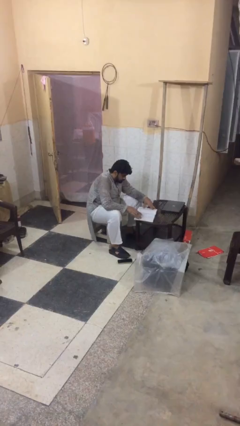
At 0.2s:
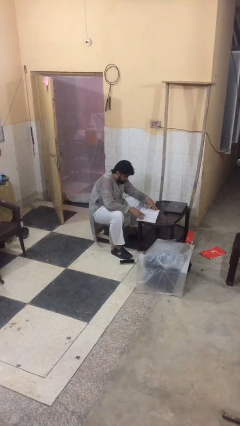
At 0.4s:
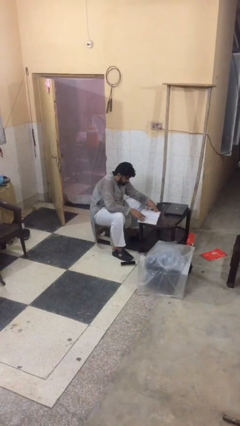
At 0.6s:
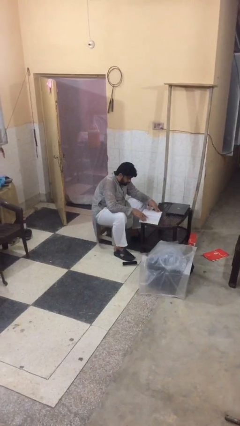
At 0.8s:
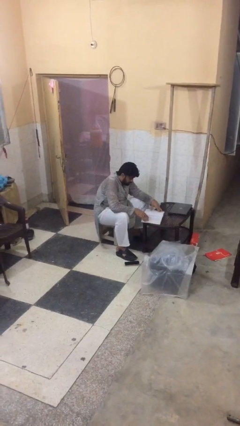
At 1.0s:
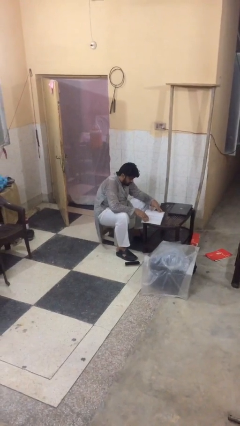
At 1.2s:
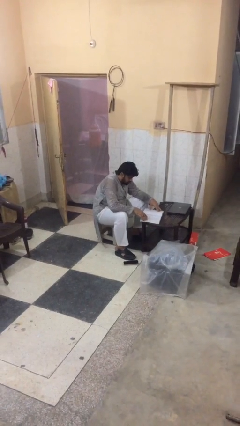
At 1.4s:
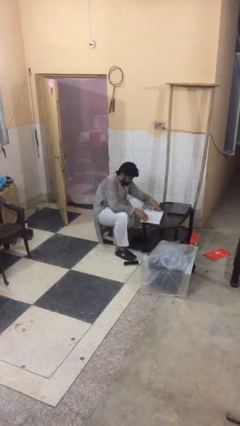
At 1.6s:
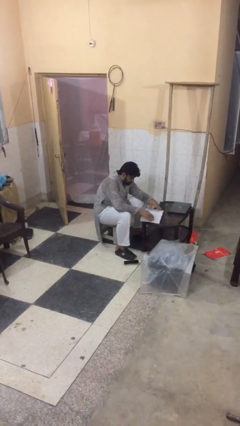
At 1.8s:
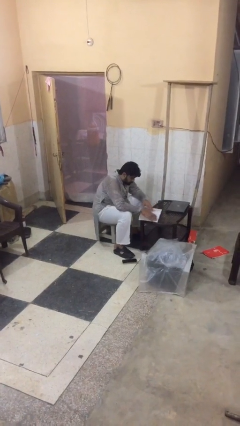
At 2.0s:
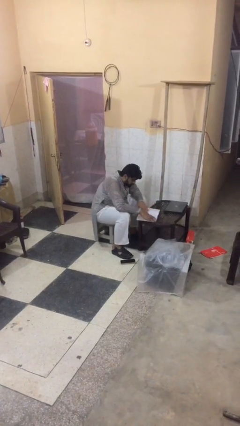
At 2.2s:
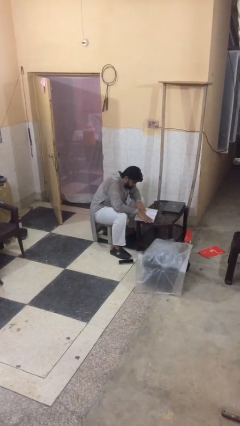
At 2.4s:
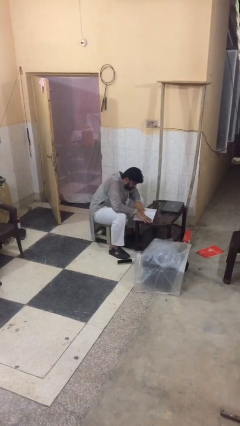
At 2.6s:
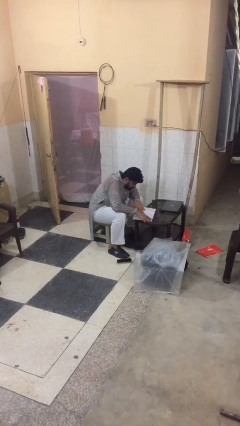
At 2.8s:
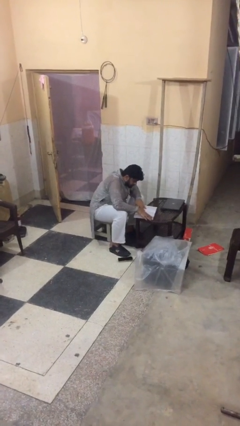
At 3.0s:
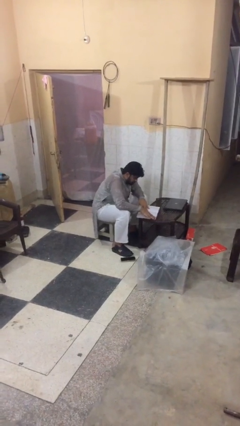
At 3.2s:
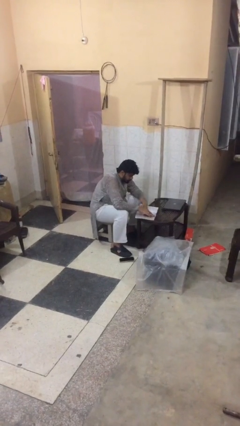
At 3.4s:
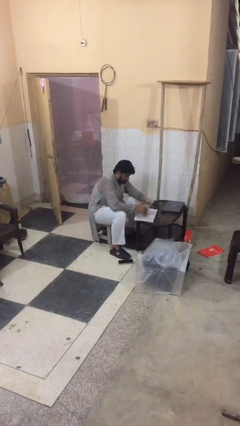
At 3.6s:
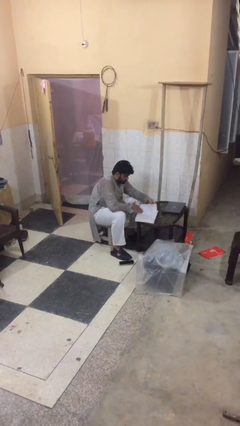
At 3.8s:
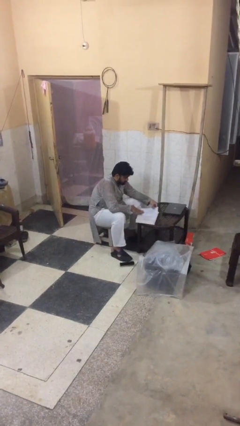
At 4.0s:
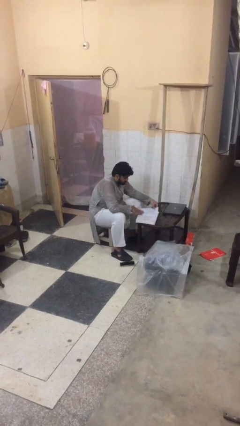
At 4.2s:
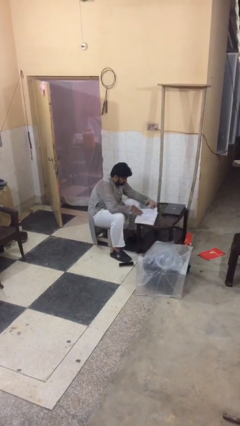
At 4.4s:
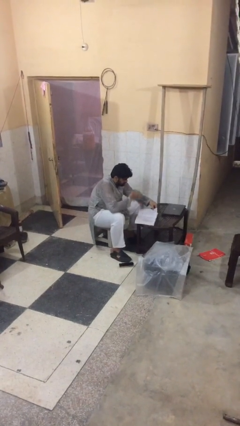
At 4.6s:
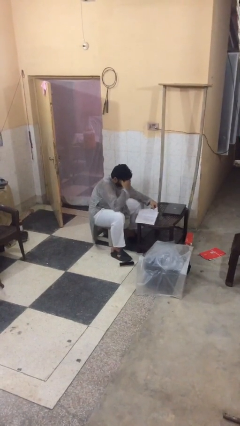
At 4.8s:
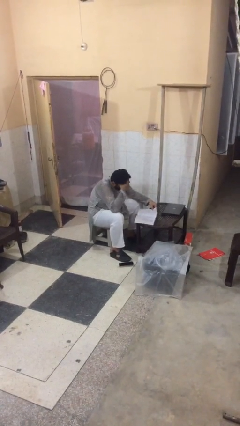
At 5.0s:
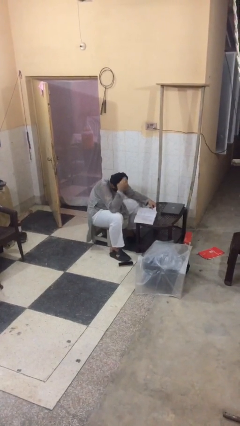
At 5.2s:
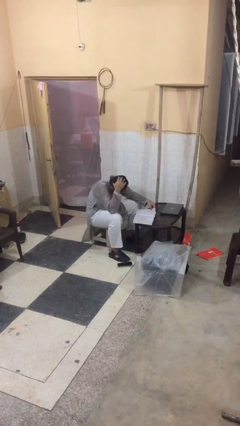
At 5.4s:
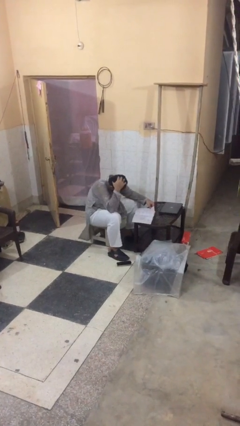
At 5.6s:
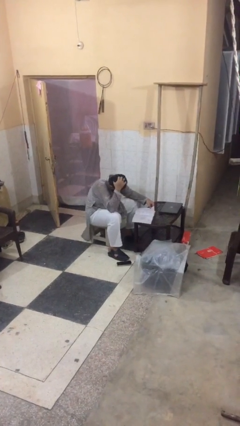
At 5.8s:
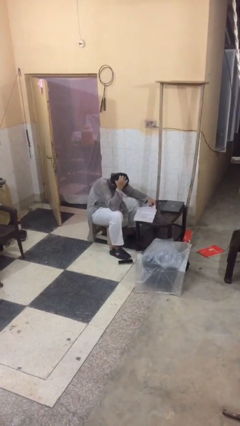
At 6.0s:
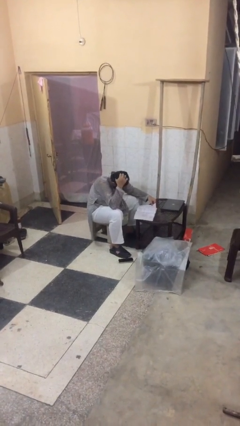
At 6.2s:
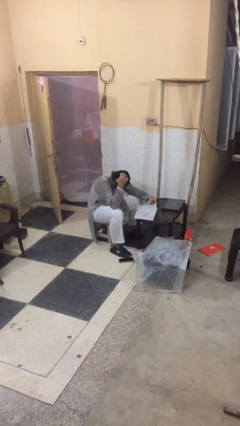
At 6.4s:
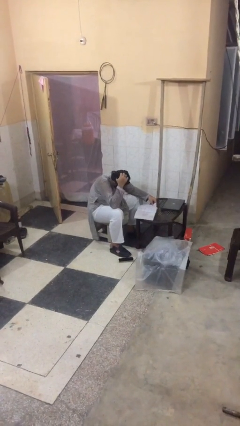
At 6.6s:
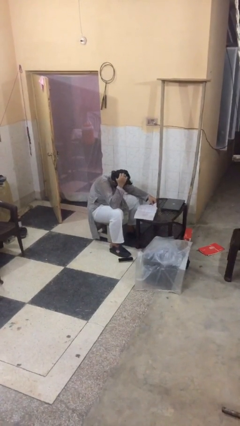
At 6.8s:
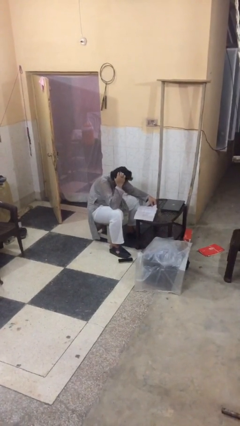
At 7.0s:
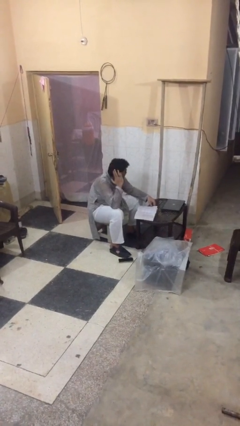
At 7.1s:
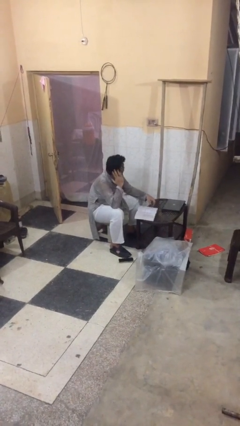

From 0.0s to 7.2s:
person reads document

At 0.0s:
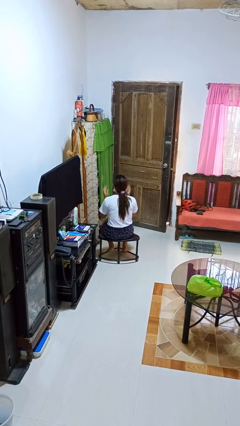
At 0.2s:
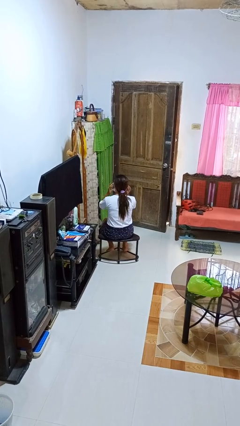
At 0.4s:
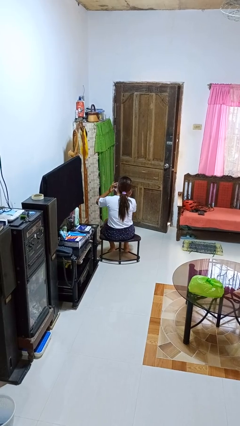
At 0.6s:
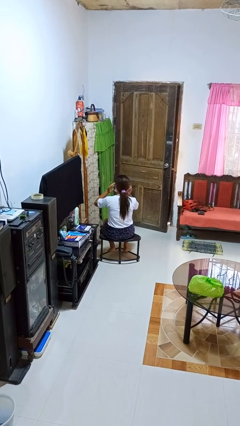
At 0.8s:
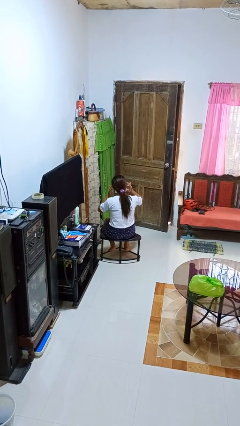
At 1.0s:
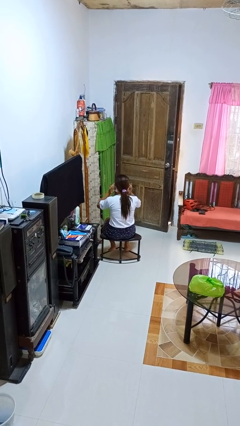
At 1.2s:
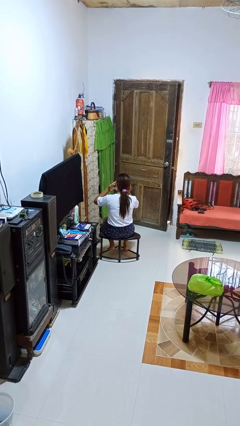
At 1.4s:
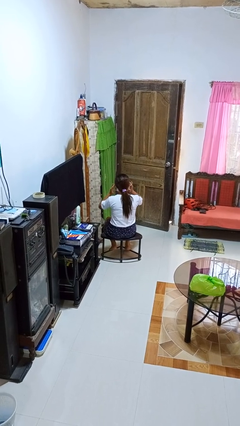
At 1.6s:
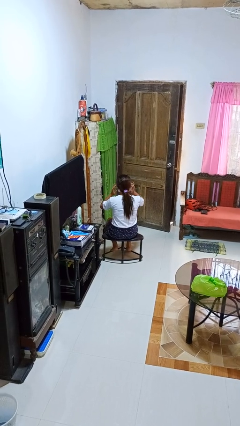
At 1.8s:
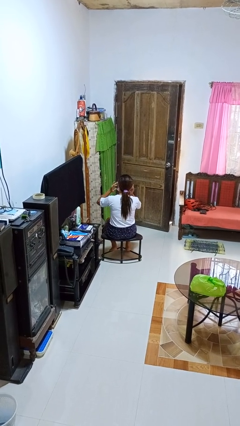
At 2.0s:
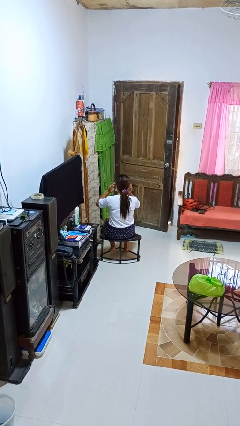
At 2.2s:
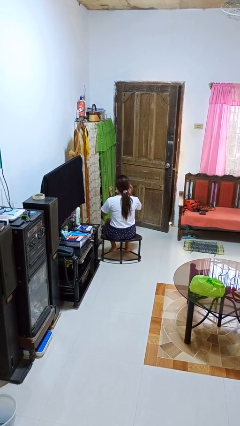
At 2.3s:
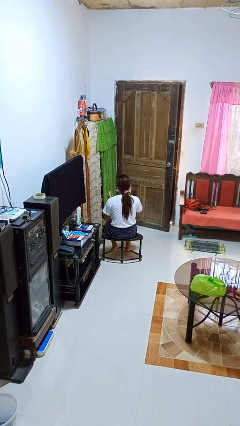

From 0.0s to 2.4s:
person puts fingers in ear

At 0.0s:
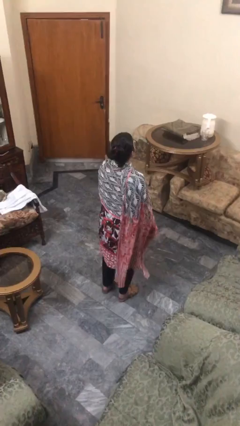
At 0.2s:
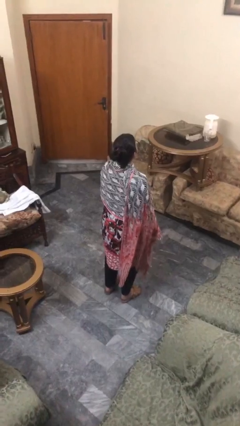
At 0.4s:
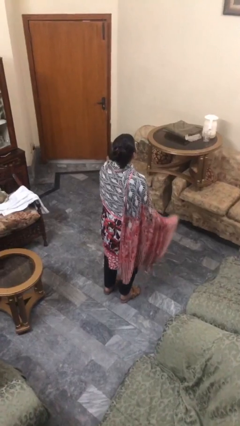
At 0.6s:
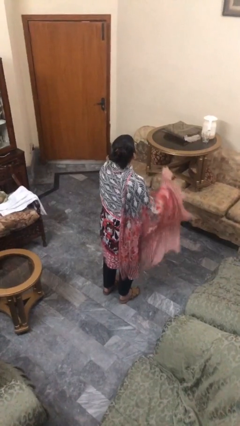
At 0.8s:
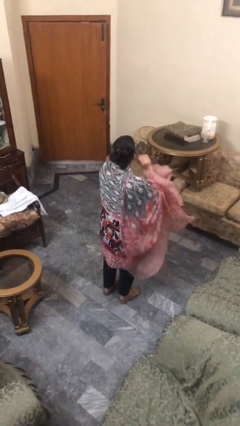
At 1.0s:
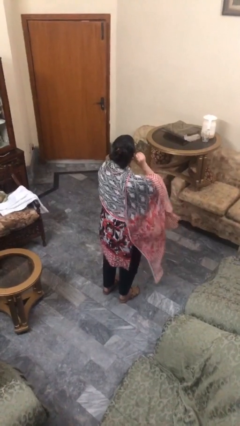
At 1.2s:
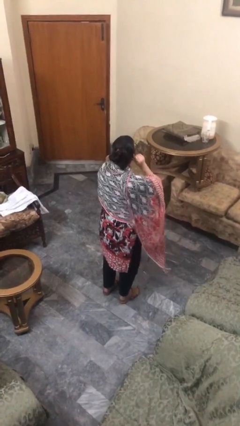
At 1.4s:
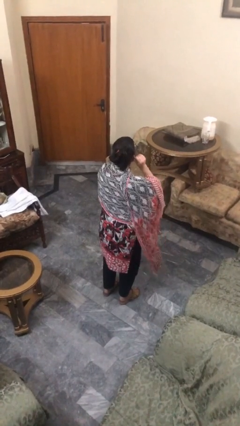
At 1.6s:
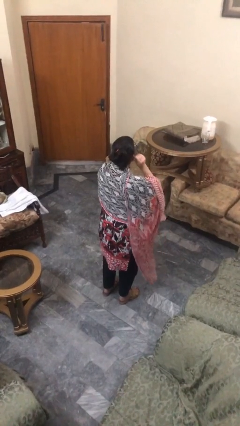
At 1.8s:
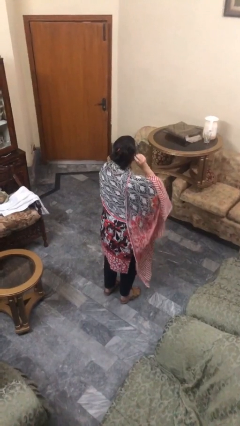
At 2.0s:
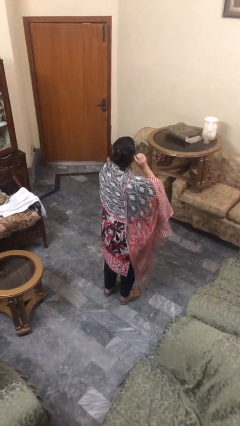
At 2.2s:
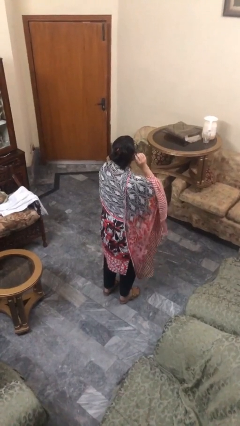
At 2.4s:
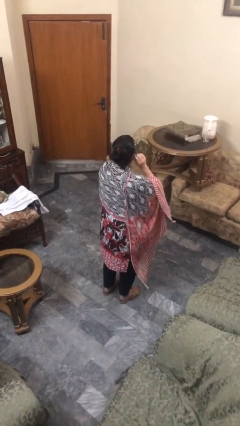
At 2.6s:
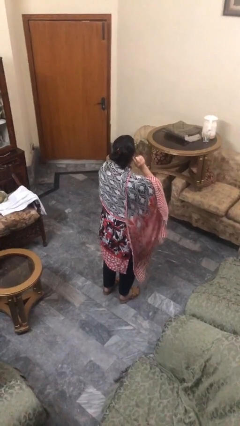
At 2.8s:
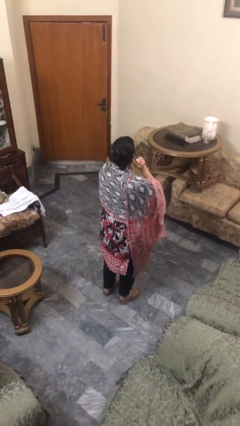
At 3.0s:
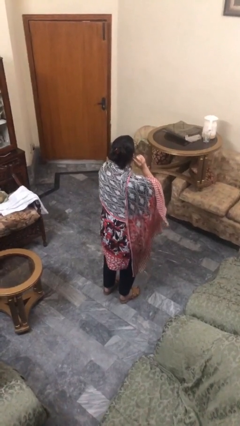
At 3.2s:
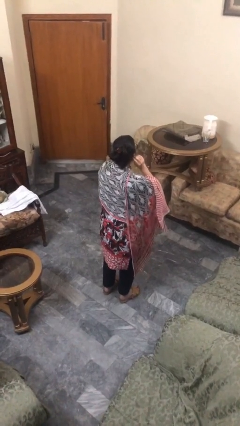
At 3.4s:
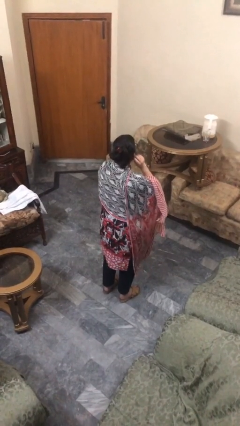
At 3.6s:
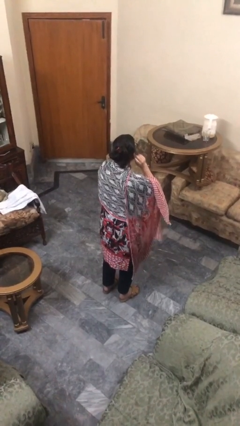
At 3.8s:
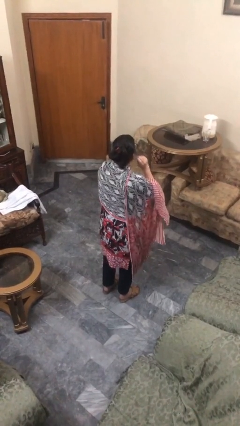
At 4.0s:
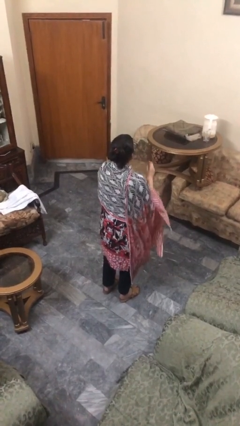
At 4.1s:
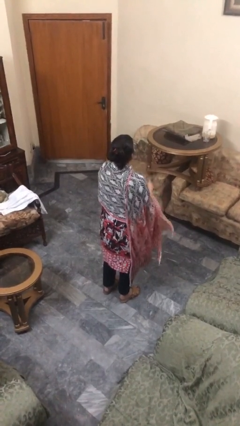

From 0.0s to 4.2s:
person touches earlobe

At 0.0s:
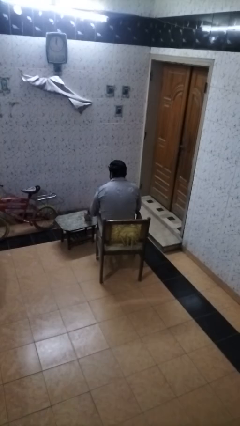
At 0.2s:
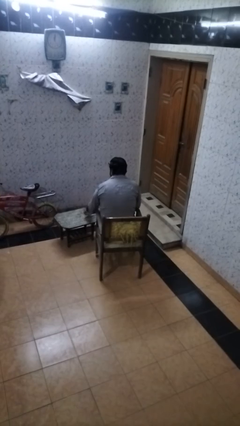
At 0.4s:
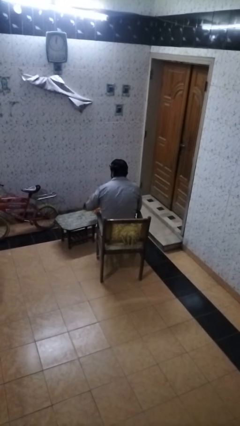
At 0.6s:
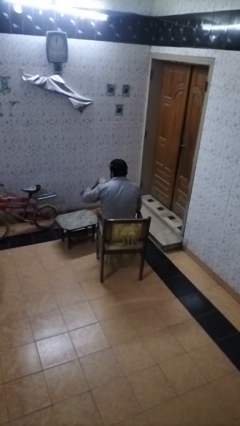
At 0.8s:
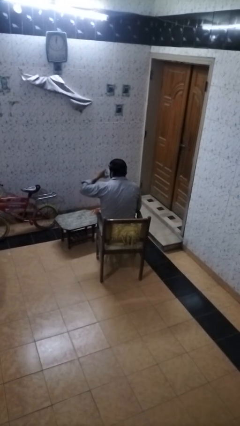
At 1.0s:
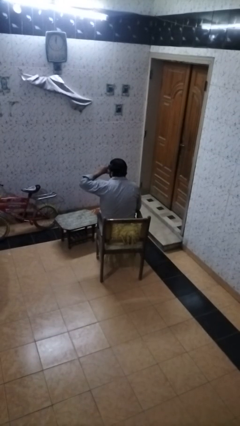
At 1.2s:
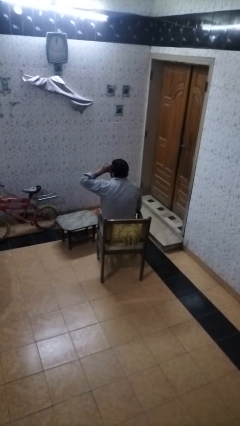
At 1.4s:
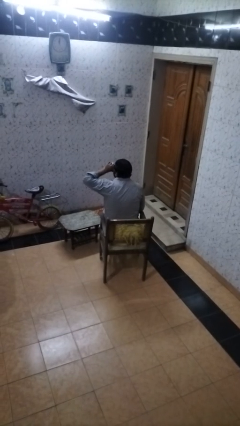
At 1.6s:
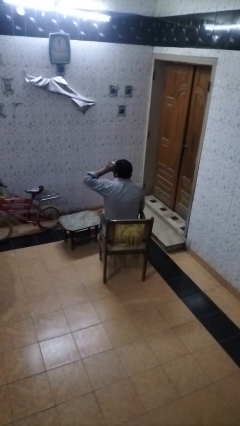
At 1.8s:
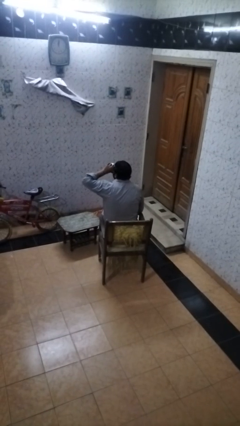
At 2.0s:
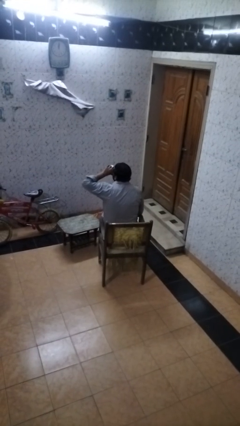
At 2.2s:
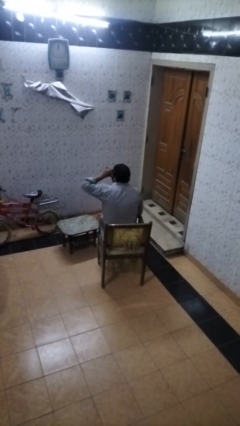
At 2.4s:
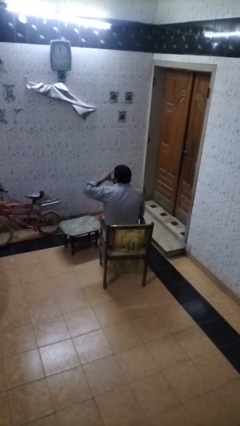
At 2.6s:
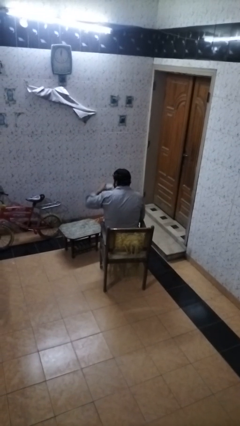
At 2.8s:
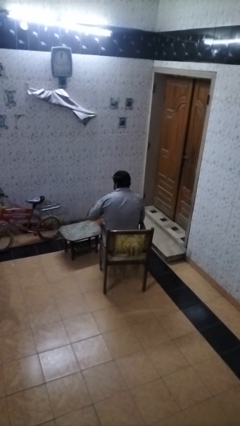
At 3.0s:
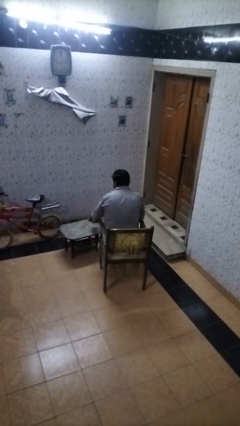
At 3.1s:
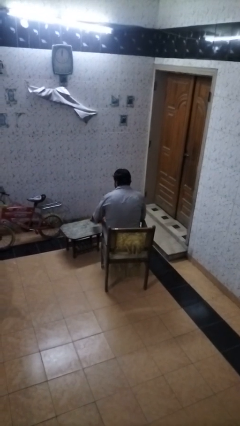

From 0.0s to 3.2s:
person drinks from cup

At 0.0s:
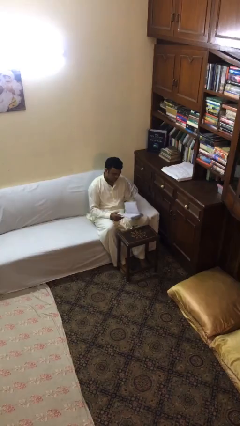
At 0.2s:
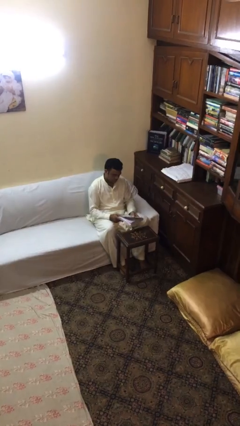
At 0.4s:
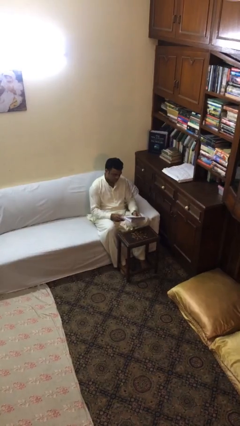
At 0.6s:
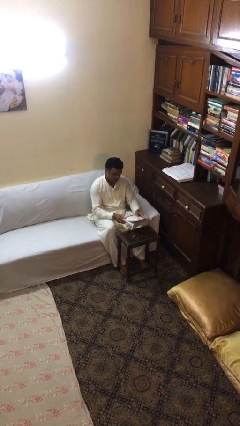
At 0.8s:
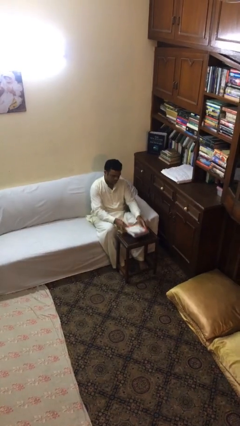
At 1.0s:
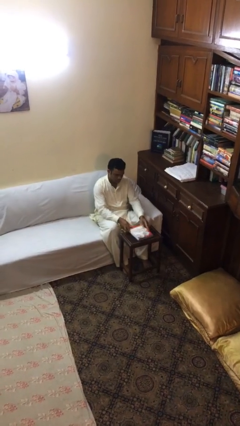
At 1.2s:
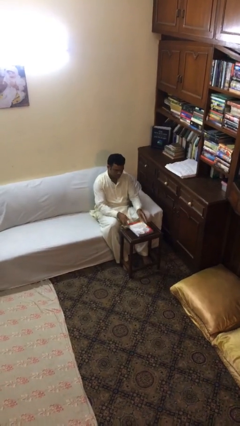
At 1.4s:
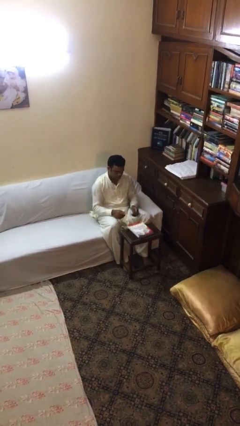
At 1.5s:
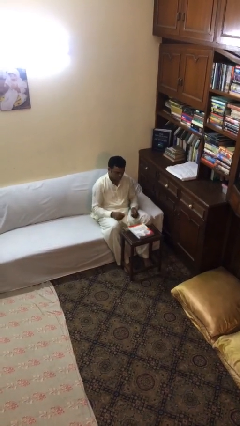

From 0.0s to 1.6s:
person puts down object on table
